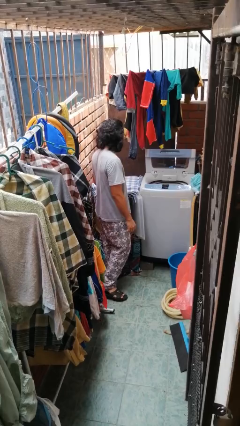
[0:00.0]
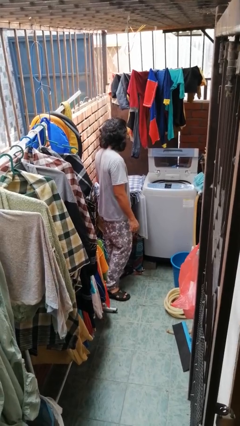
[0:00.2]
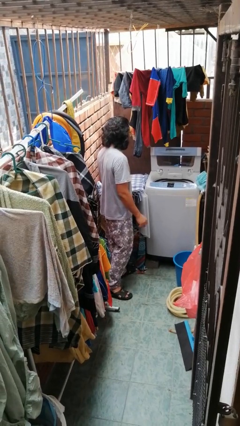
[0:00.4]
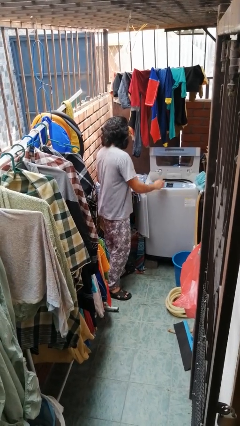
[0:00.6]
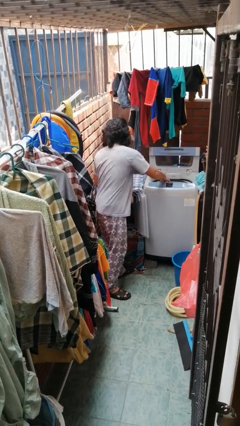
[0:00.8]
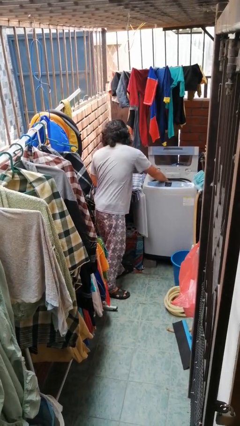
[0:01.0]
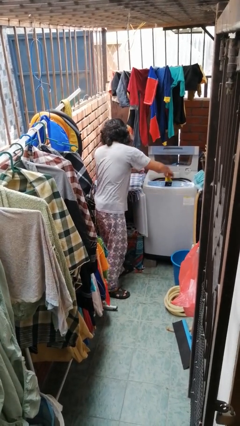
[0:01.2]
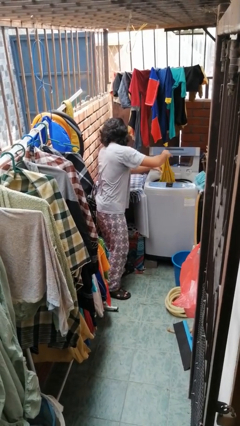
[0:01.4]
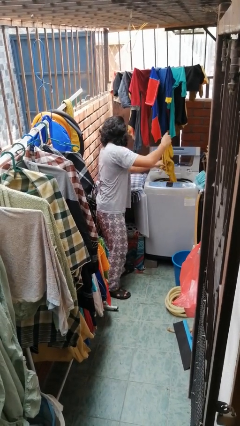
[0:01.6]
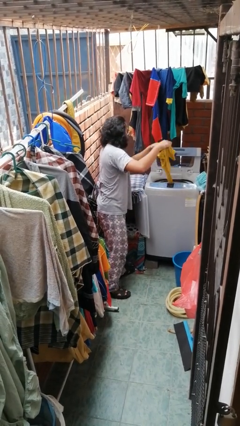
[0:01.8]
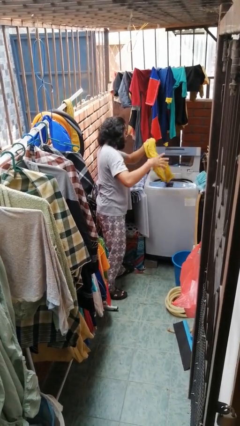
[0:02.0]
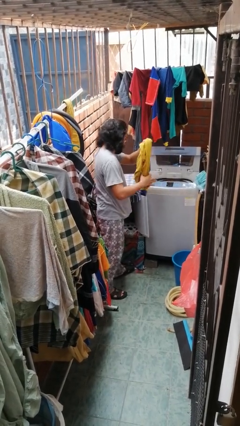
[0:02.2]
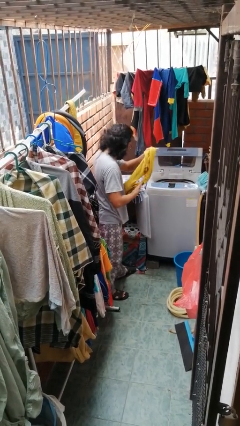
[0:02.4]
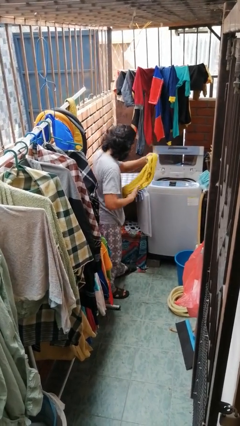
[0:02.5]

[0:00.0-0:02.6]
person unloads clotheswasher

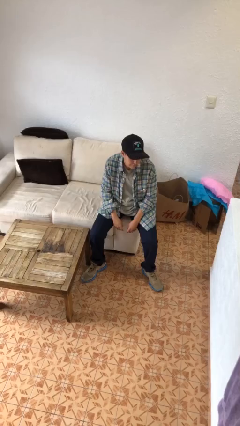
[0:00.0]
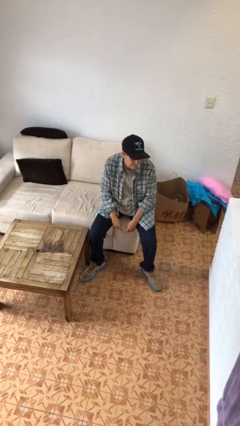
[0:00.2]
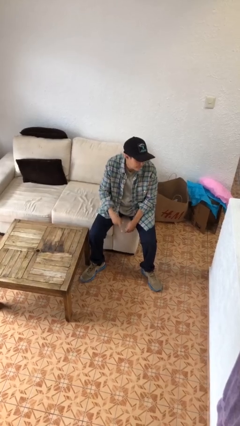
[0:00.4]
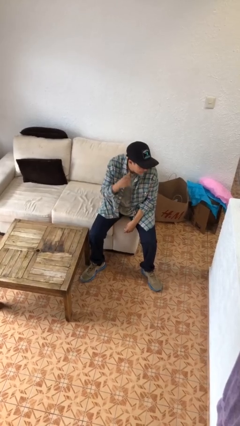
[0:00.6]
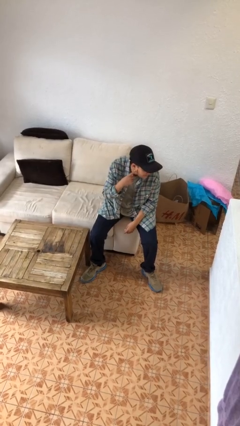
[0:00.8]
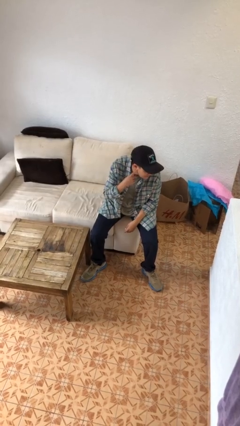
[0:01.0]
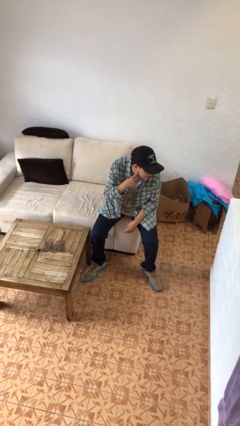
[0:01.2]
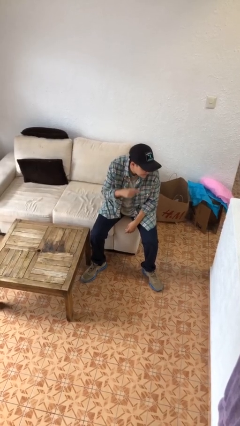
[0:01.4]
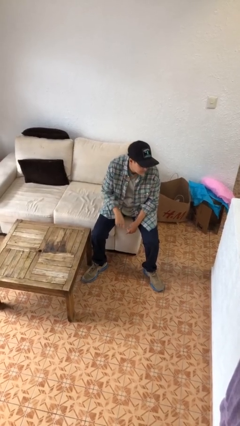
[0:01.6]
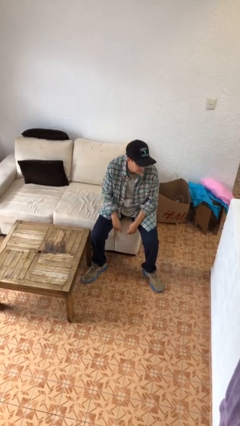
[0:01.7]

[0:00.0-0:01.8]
person gestures listen closely

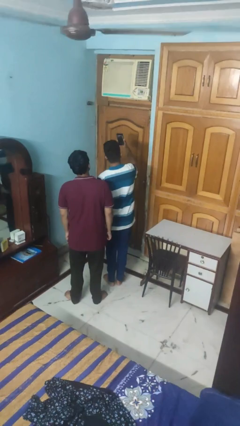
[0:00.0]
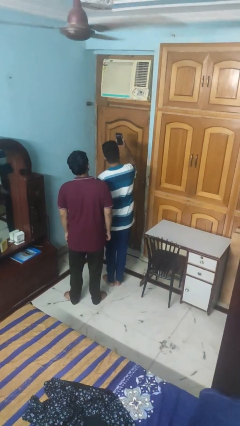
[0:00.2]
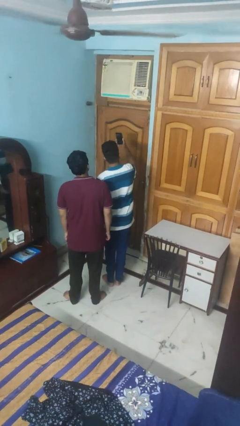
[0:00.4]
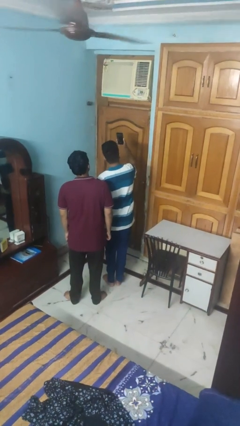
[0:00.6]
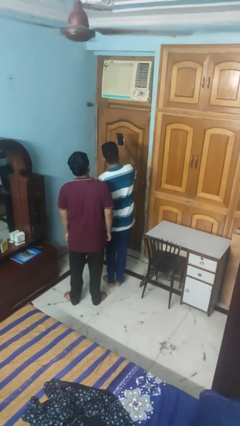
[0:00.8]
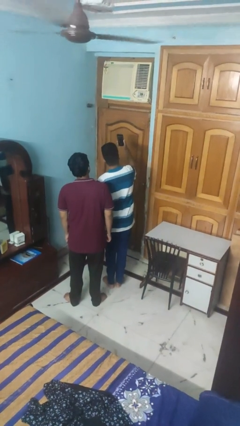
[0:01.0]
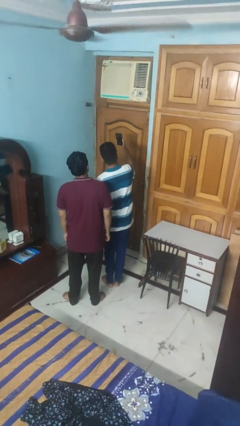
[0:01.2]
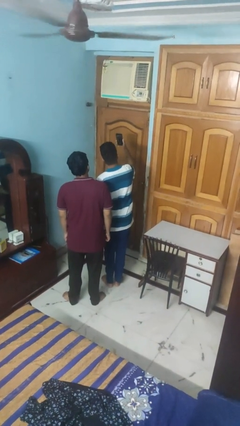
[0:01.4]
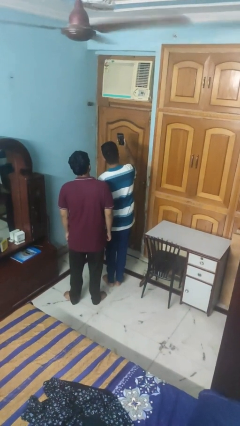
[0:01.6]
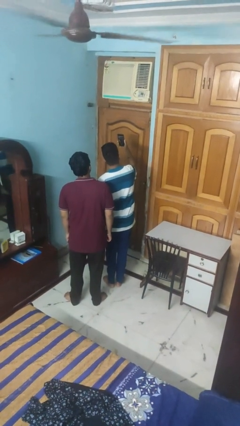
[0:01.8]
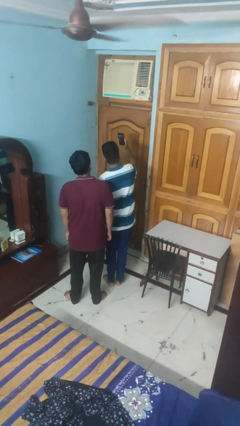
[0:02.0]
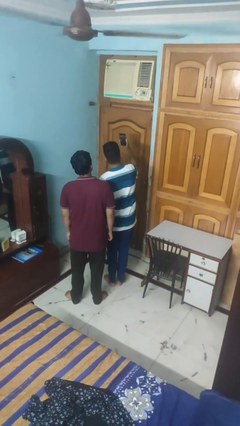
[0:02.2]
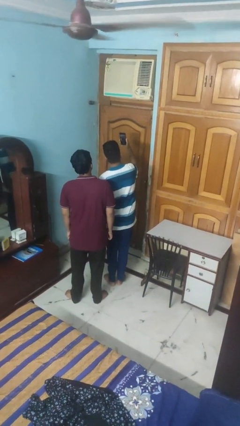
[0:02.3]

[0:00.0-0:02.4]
person takes selfie with person

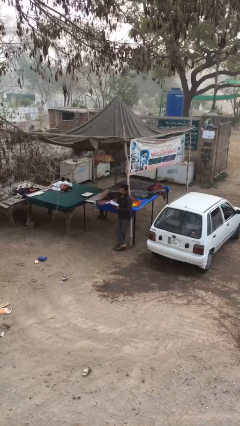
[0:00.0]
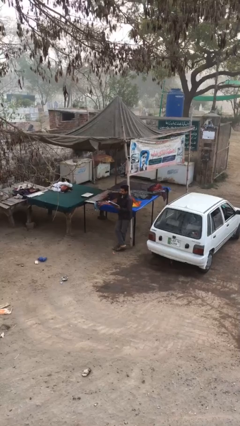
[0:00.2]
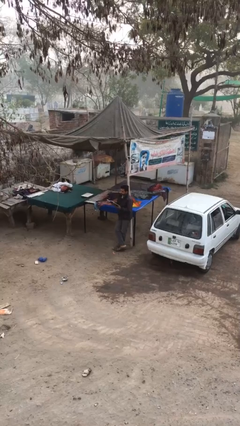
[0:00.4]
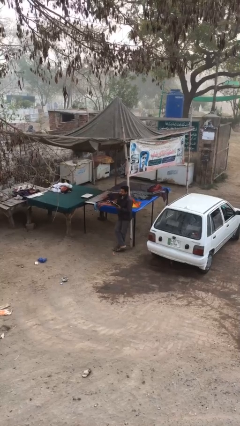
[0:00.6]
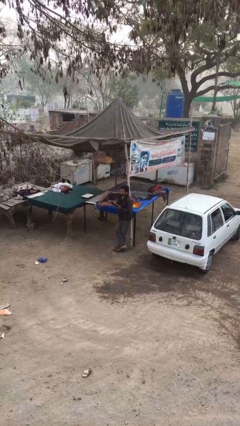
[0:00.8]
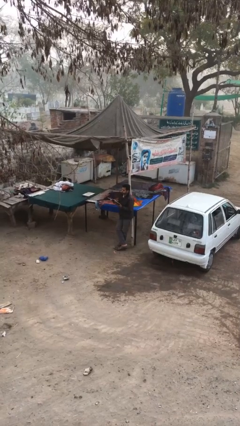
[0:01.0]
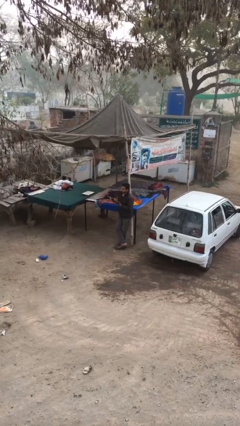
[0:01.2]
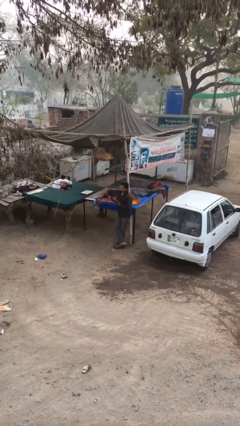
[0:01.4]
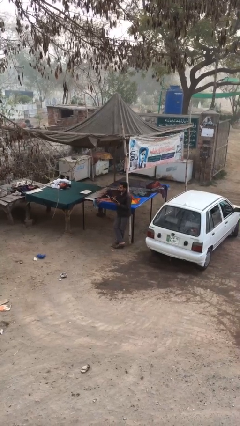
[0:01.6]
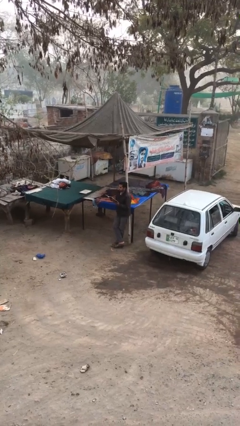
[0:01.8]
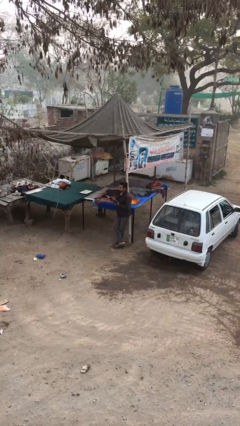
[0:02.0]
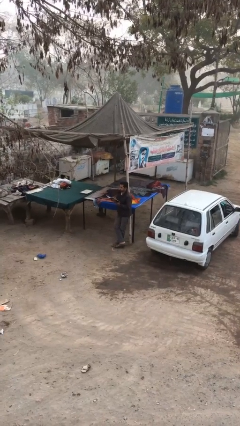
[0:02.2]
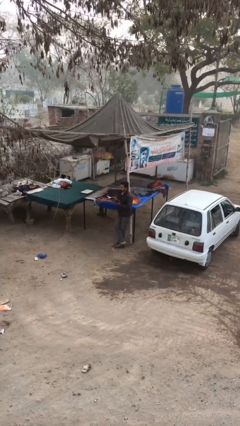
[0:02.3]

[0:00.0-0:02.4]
person reads document

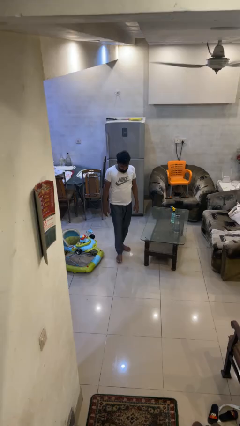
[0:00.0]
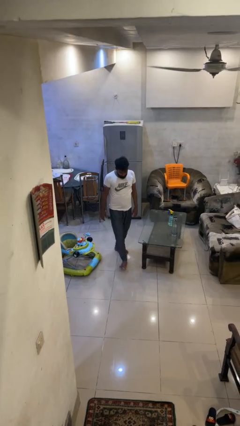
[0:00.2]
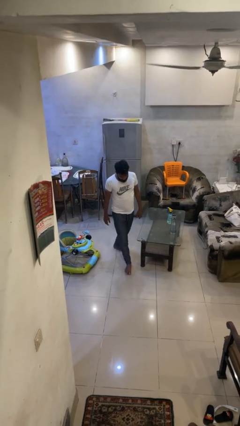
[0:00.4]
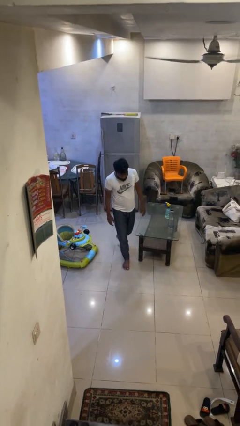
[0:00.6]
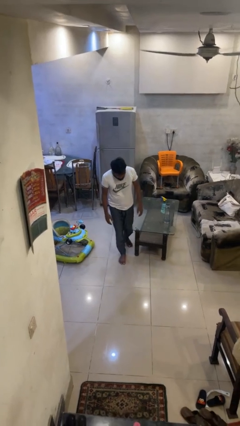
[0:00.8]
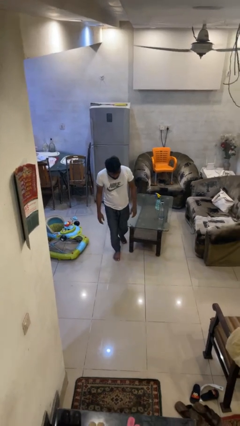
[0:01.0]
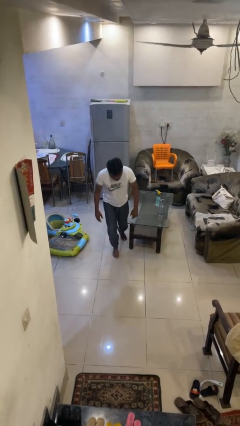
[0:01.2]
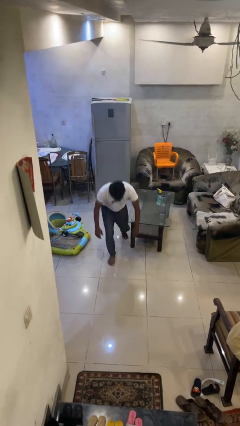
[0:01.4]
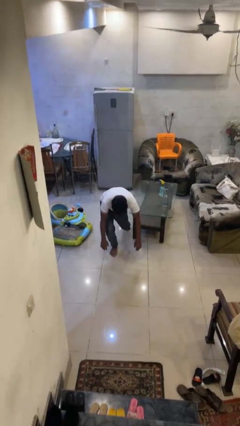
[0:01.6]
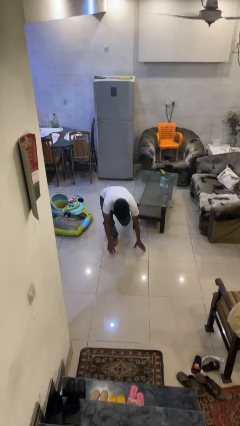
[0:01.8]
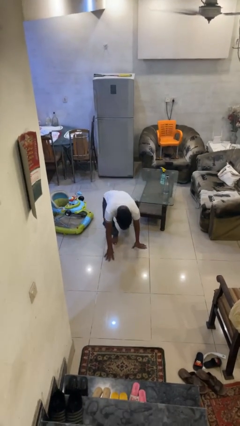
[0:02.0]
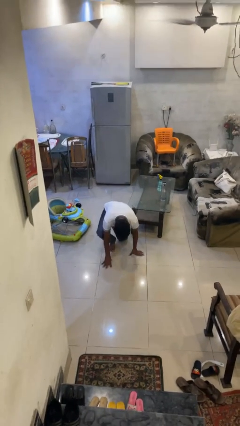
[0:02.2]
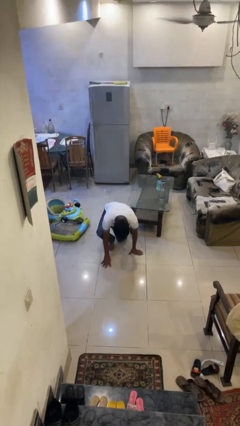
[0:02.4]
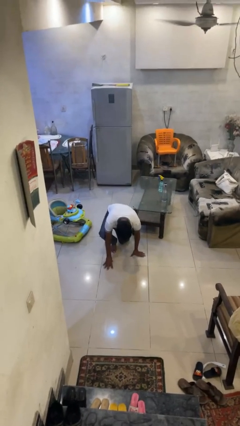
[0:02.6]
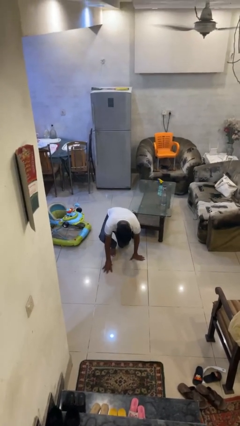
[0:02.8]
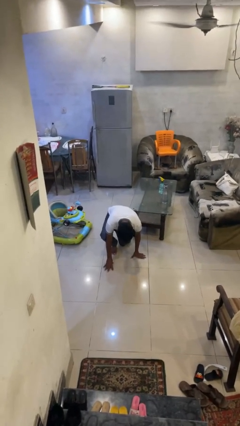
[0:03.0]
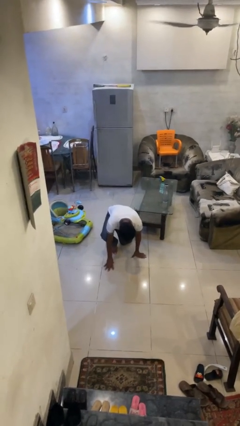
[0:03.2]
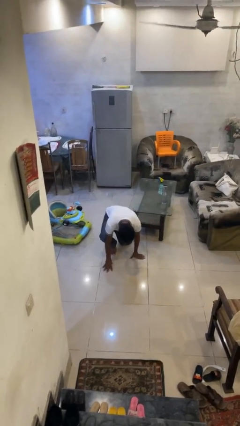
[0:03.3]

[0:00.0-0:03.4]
person trips on object on floor

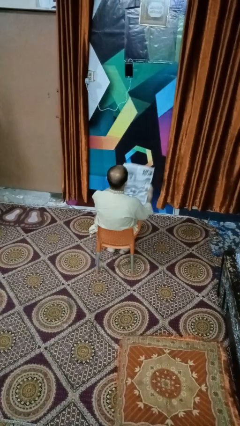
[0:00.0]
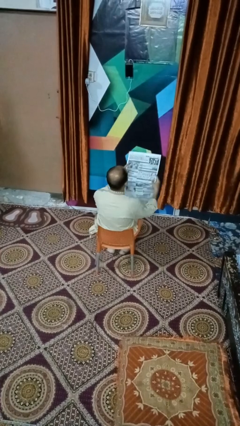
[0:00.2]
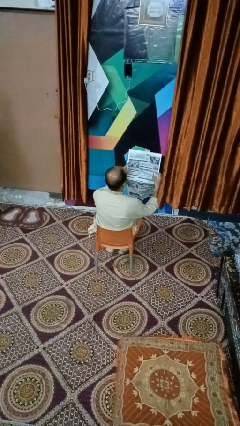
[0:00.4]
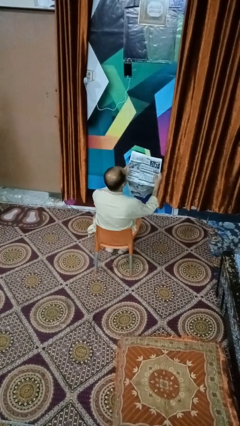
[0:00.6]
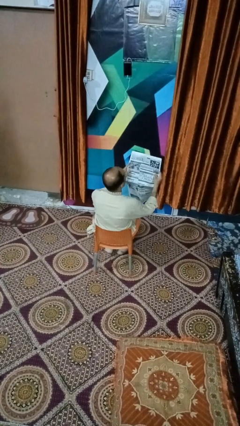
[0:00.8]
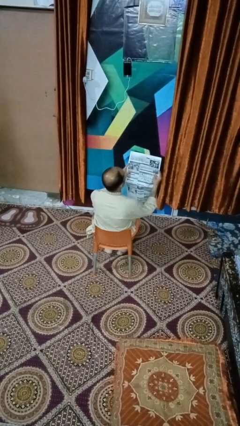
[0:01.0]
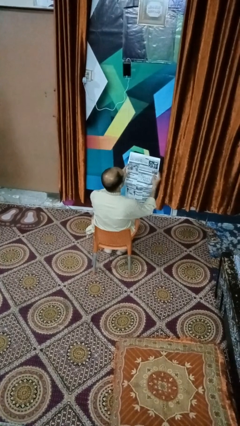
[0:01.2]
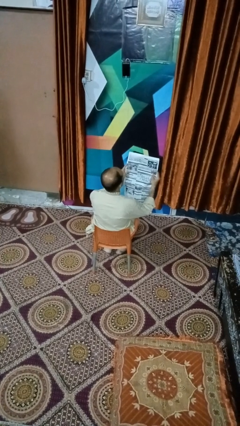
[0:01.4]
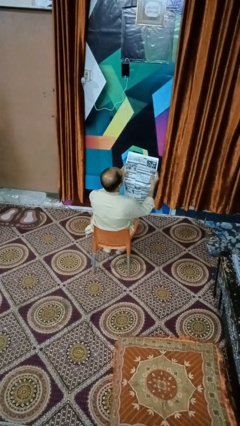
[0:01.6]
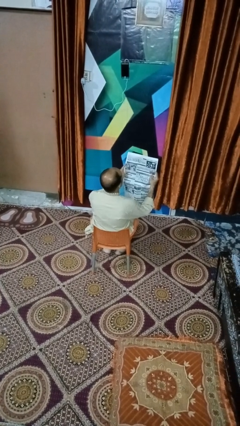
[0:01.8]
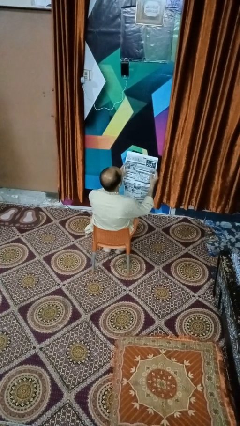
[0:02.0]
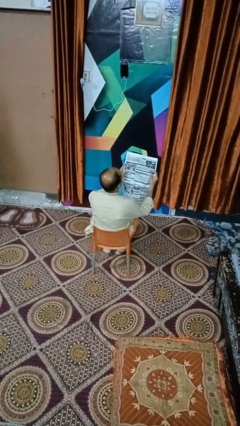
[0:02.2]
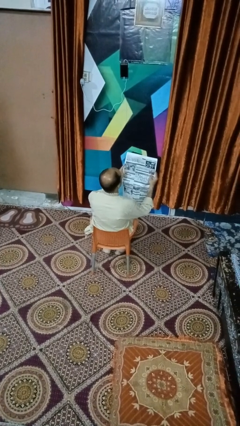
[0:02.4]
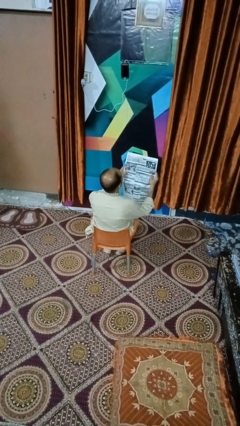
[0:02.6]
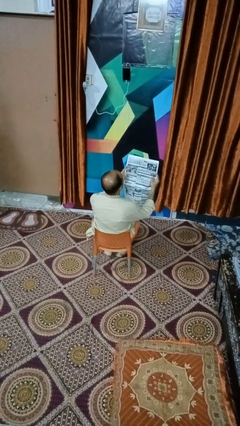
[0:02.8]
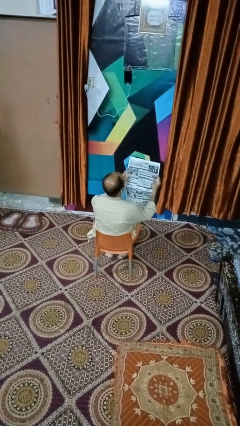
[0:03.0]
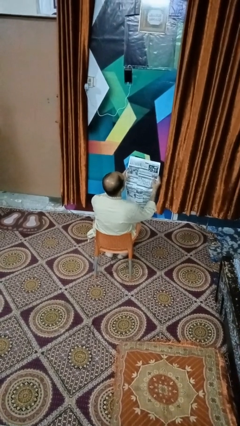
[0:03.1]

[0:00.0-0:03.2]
person reads newspaper

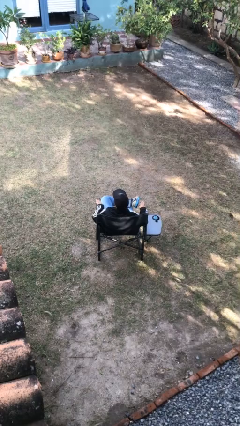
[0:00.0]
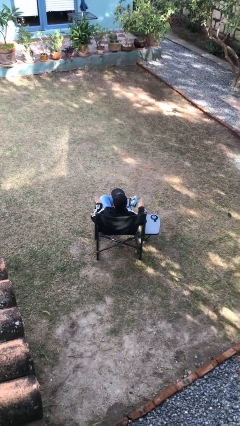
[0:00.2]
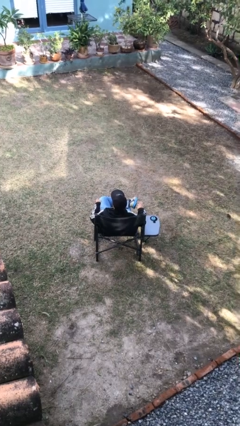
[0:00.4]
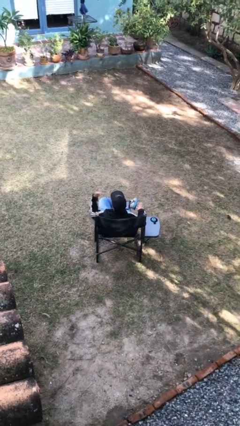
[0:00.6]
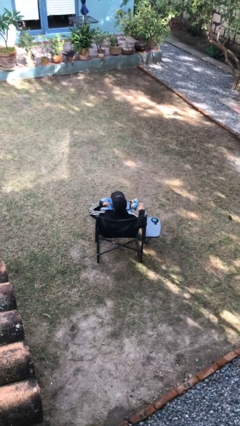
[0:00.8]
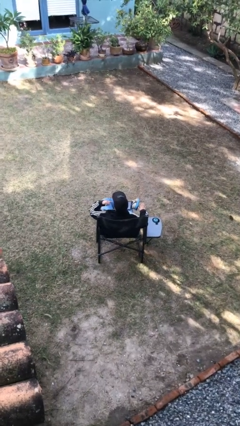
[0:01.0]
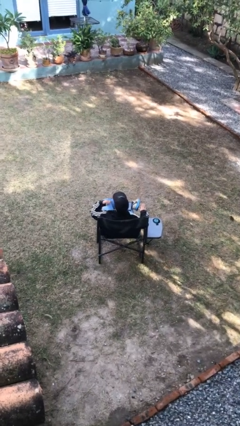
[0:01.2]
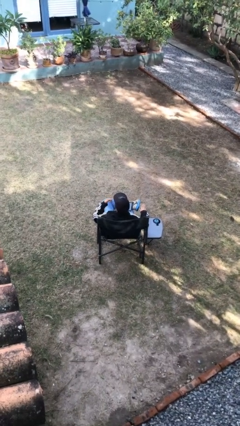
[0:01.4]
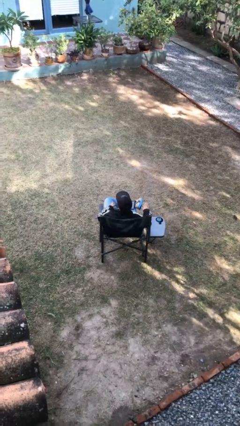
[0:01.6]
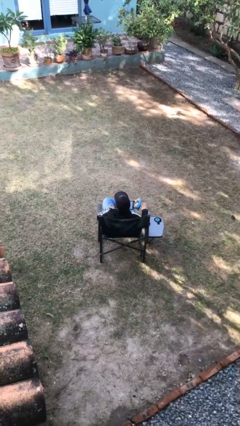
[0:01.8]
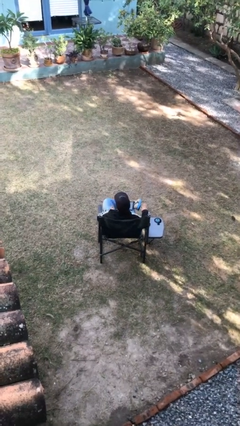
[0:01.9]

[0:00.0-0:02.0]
person gestures call me
